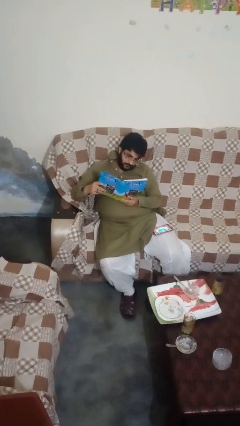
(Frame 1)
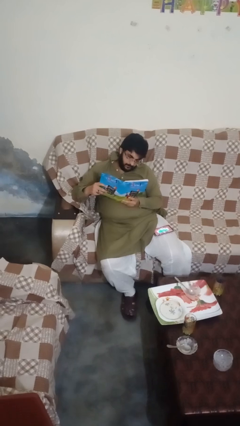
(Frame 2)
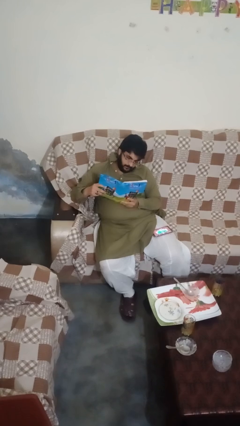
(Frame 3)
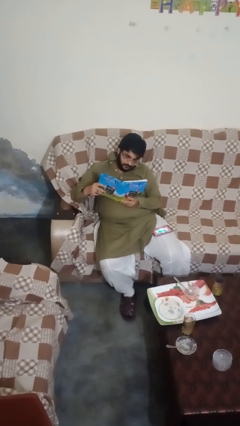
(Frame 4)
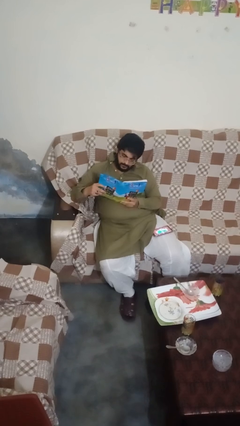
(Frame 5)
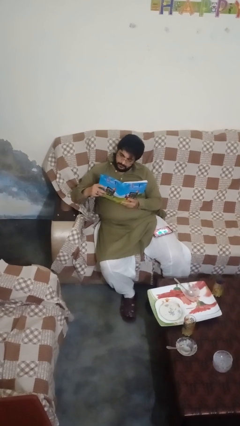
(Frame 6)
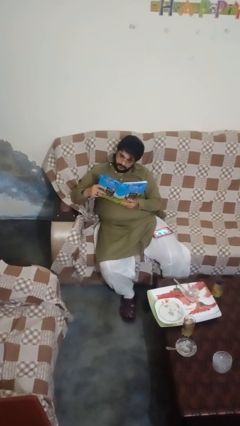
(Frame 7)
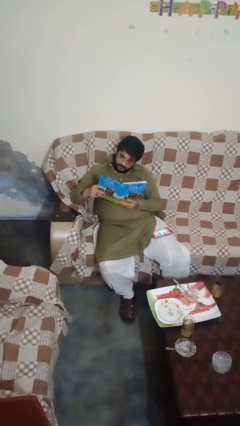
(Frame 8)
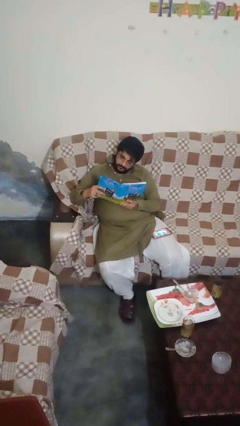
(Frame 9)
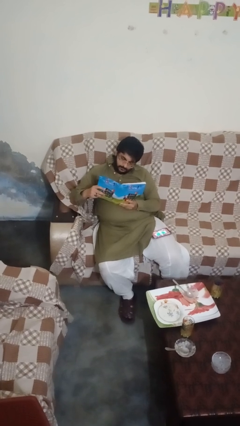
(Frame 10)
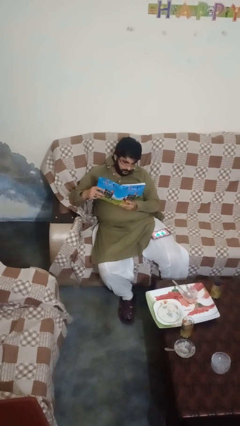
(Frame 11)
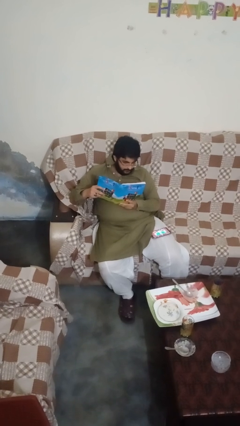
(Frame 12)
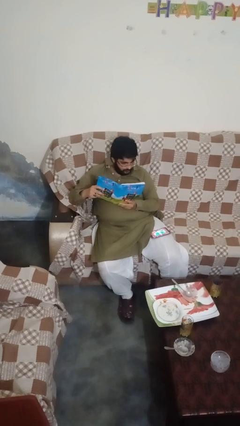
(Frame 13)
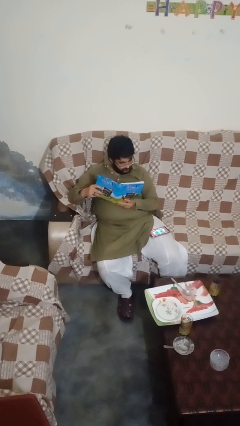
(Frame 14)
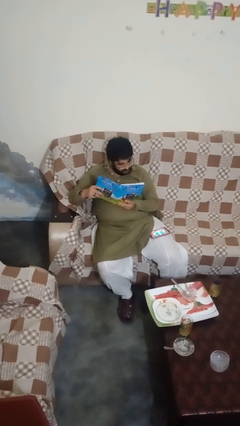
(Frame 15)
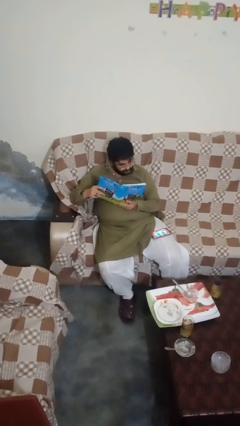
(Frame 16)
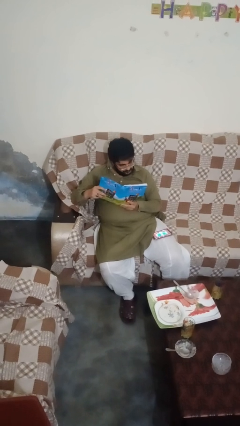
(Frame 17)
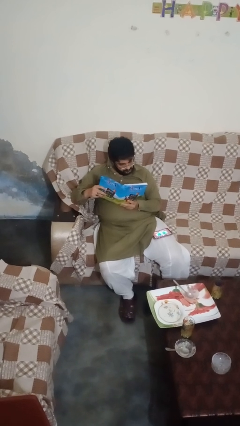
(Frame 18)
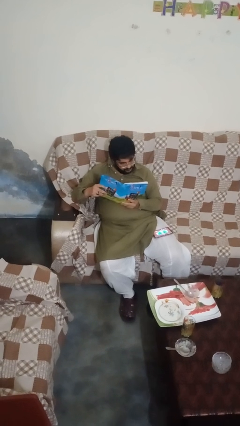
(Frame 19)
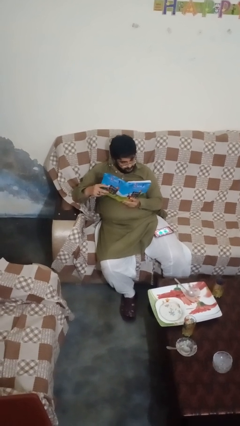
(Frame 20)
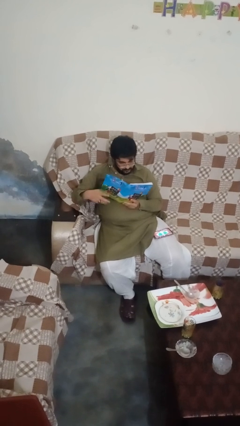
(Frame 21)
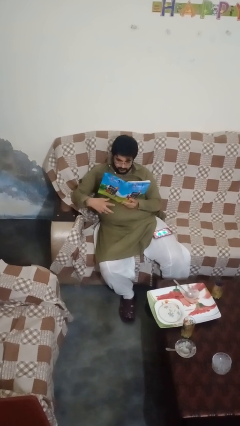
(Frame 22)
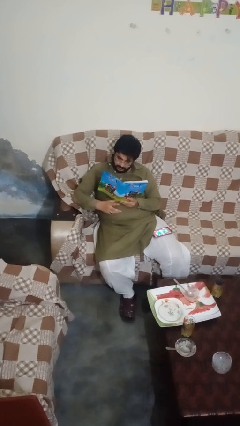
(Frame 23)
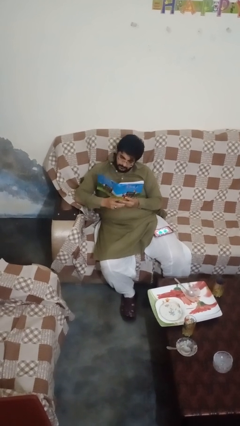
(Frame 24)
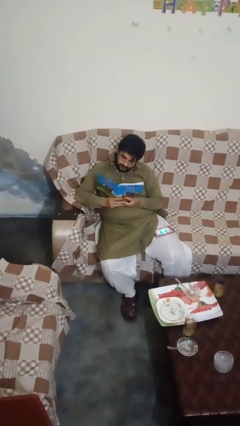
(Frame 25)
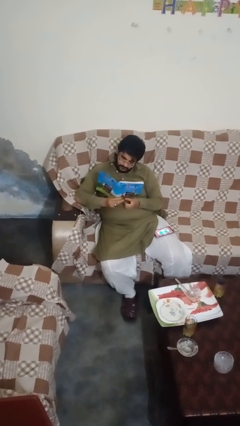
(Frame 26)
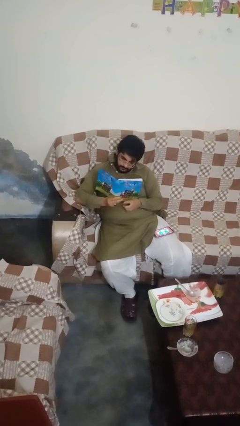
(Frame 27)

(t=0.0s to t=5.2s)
person reads magazine
